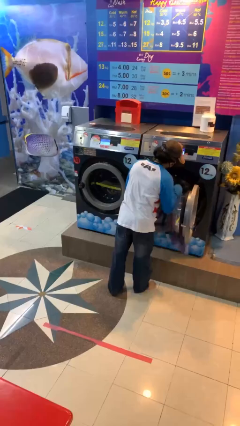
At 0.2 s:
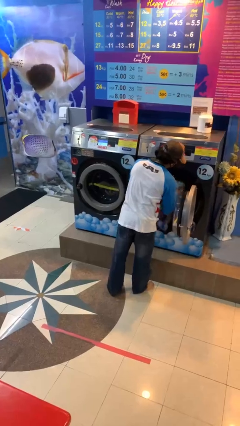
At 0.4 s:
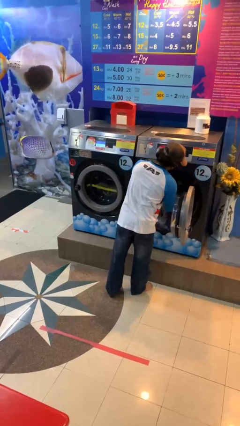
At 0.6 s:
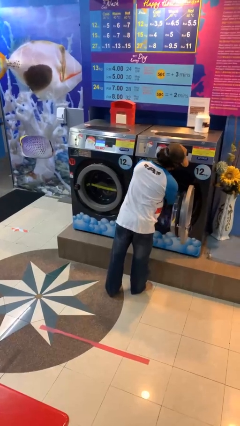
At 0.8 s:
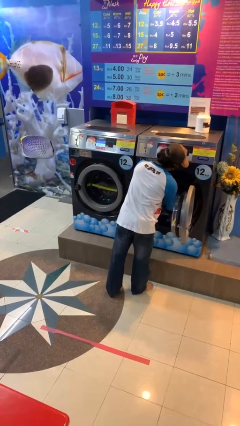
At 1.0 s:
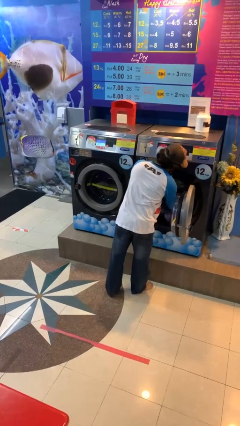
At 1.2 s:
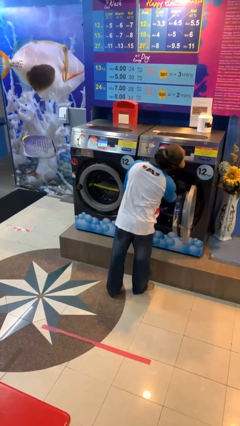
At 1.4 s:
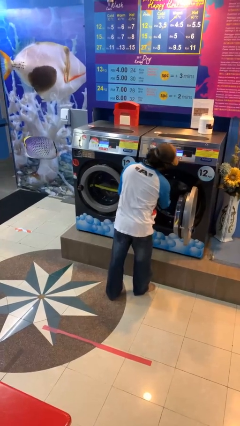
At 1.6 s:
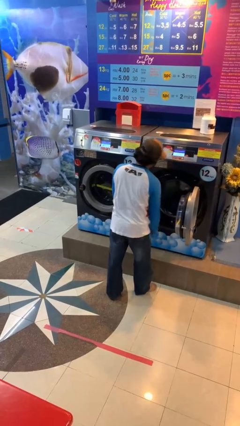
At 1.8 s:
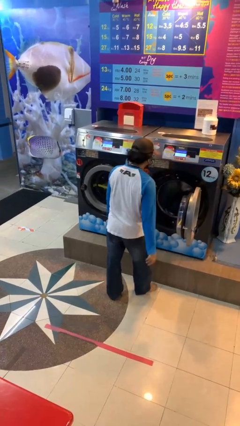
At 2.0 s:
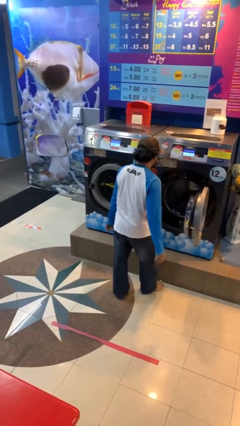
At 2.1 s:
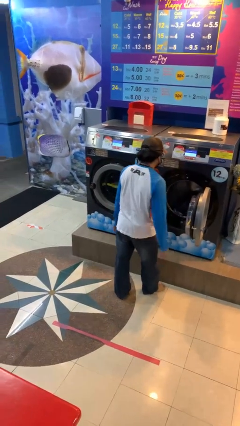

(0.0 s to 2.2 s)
person loads clotheswasher

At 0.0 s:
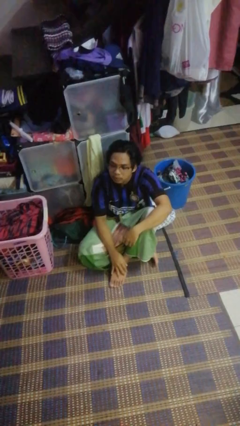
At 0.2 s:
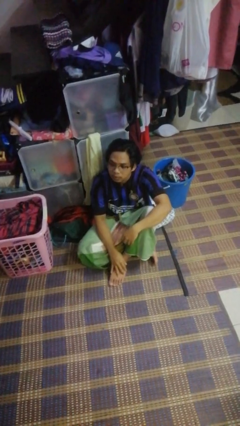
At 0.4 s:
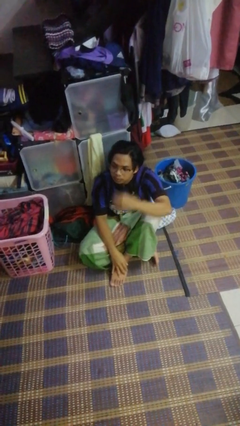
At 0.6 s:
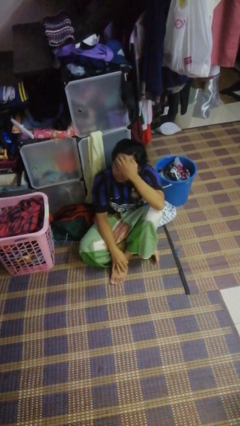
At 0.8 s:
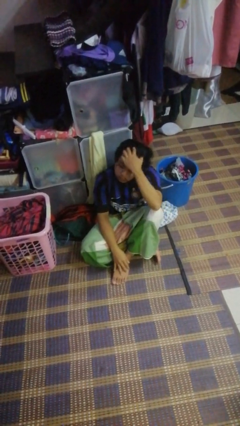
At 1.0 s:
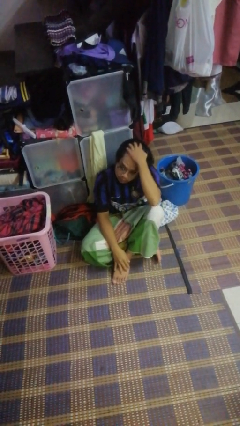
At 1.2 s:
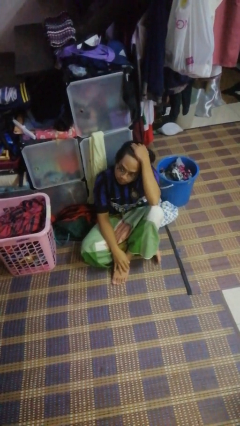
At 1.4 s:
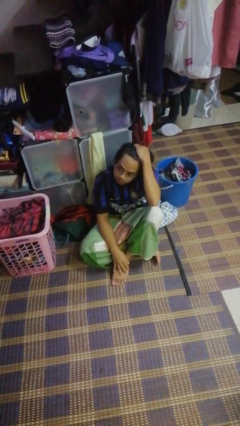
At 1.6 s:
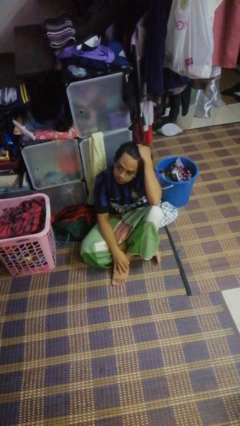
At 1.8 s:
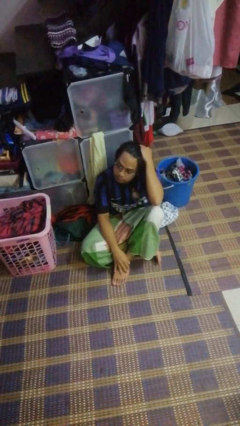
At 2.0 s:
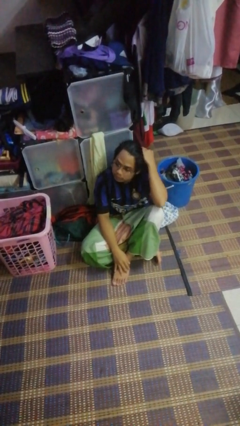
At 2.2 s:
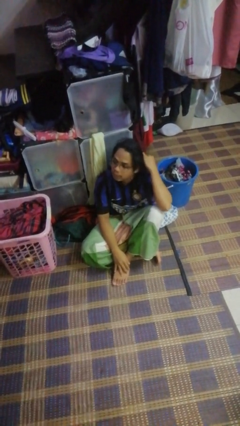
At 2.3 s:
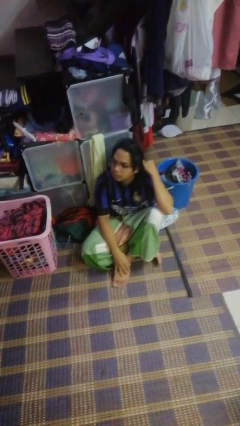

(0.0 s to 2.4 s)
person strokes hair

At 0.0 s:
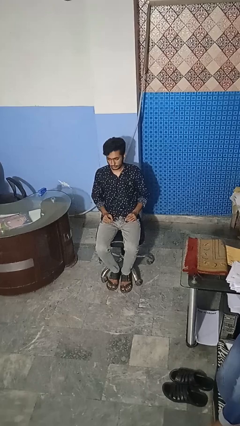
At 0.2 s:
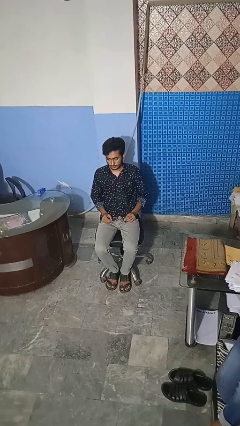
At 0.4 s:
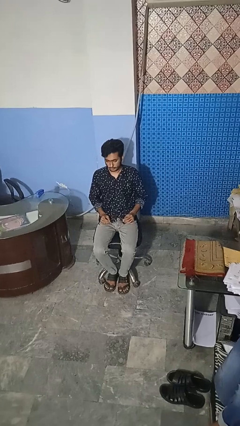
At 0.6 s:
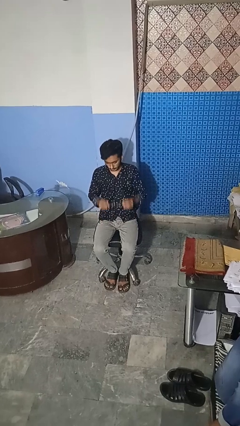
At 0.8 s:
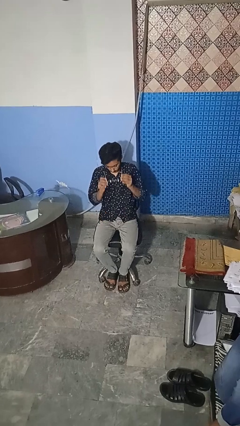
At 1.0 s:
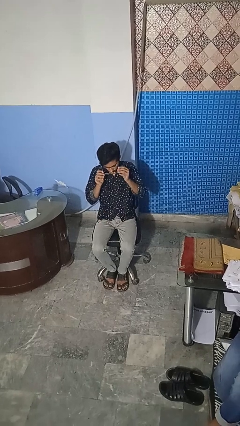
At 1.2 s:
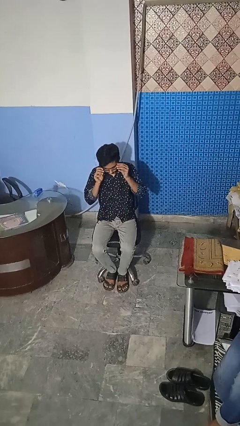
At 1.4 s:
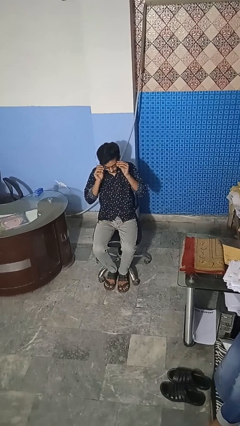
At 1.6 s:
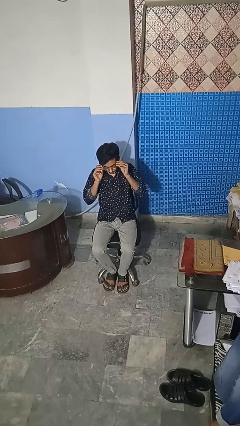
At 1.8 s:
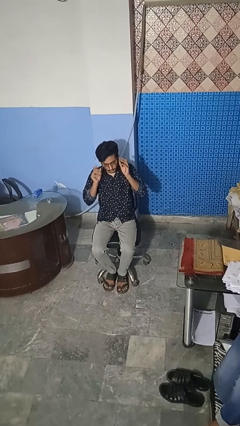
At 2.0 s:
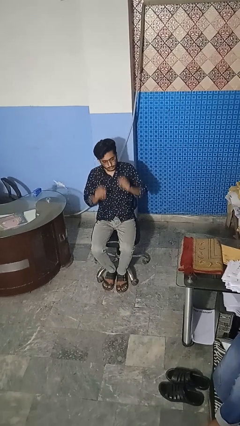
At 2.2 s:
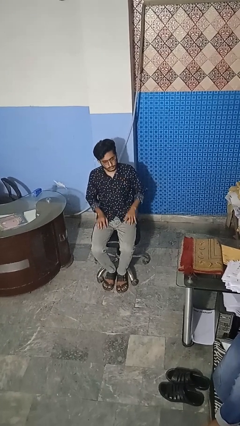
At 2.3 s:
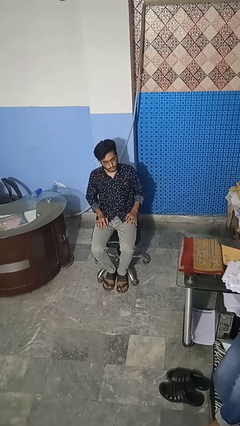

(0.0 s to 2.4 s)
person puts on glasses

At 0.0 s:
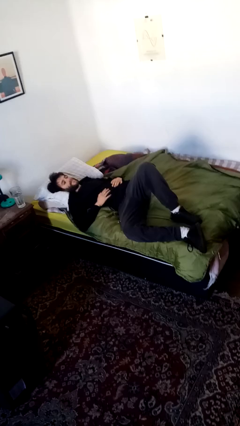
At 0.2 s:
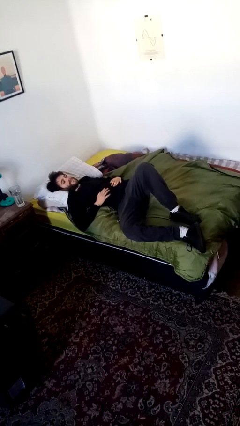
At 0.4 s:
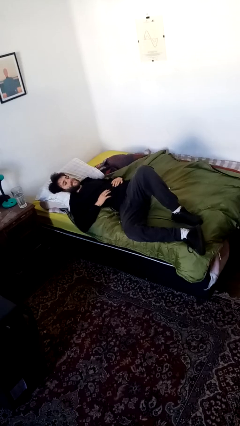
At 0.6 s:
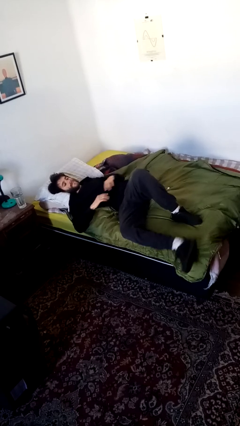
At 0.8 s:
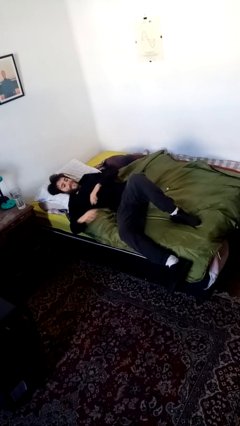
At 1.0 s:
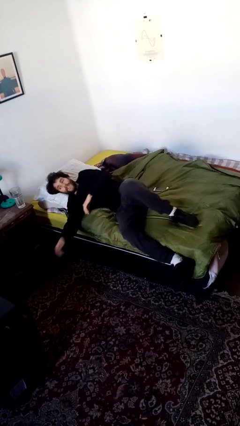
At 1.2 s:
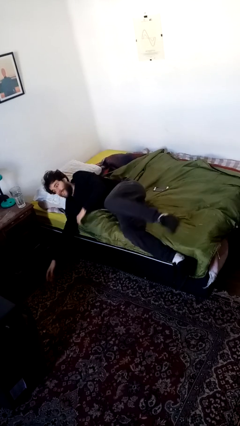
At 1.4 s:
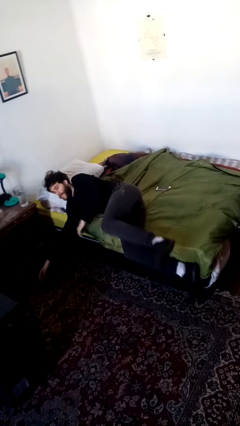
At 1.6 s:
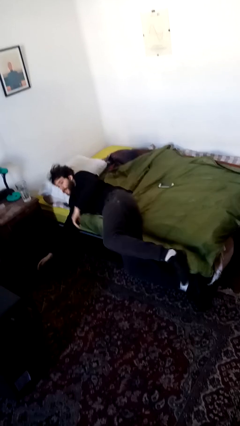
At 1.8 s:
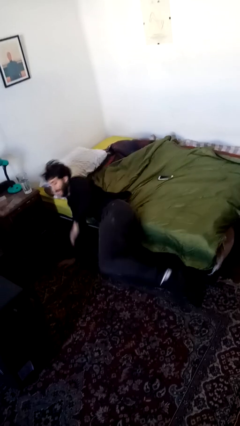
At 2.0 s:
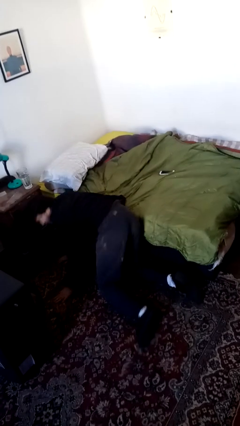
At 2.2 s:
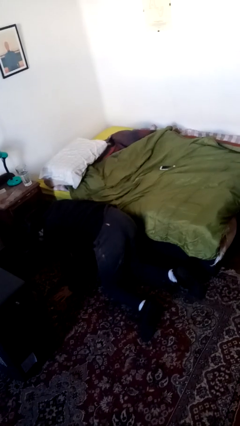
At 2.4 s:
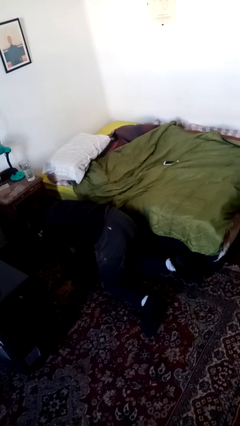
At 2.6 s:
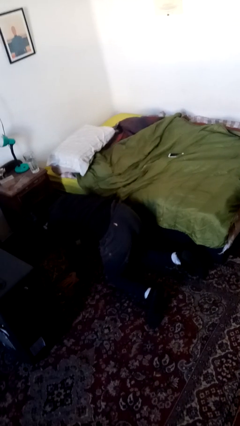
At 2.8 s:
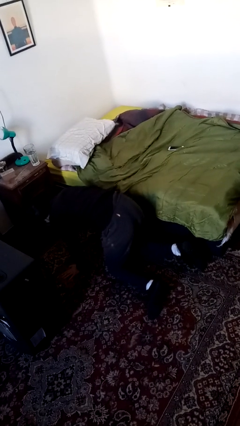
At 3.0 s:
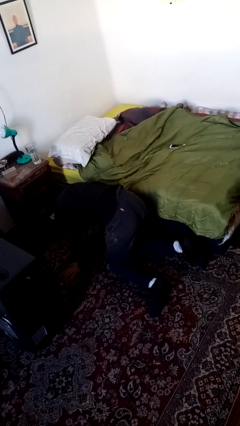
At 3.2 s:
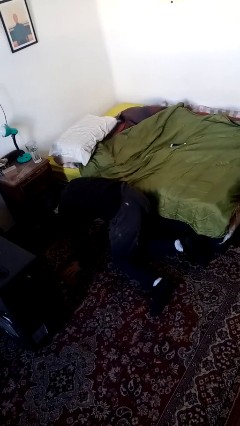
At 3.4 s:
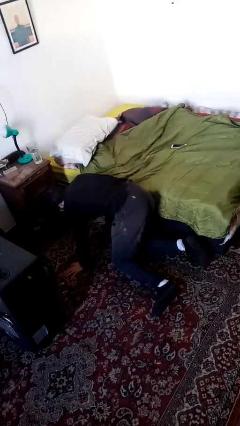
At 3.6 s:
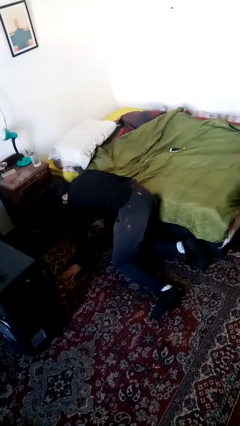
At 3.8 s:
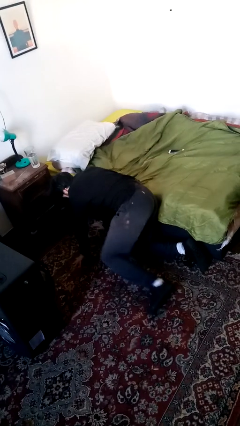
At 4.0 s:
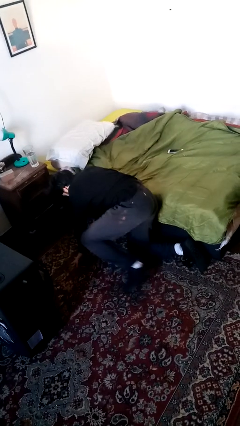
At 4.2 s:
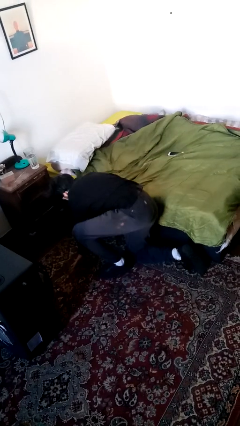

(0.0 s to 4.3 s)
person falls from chair

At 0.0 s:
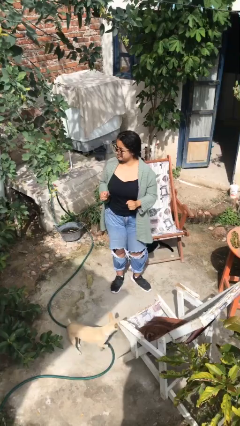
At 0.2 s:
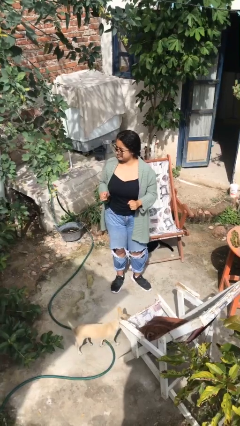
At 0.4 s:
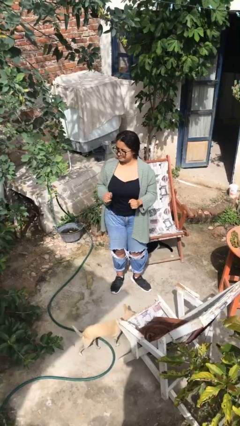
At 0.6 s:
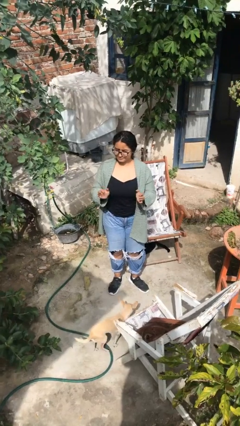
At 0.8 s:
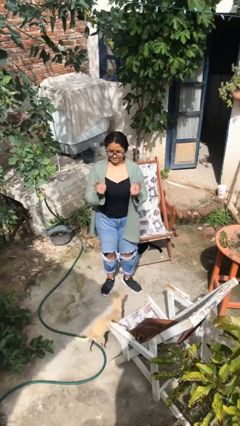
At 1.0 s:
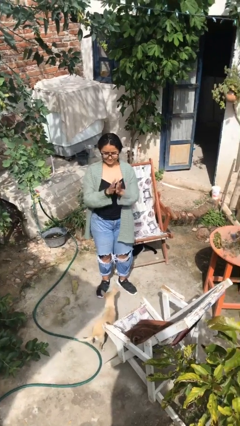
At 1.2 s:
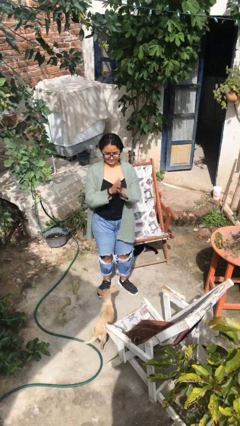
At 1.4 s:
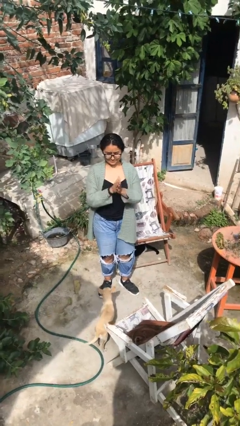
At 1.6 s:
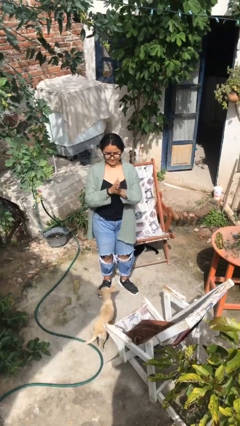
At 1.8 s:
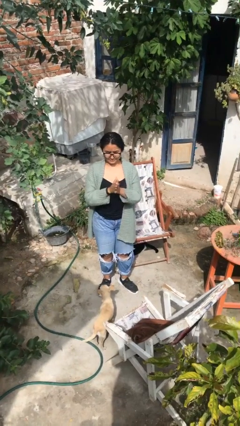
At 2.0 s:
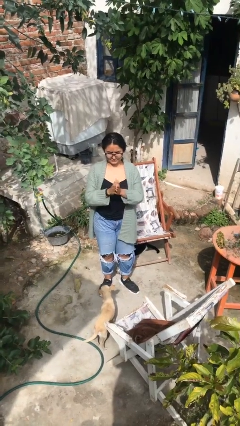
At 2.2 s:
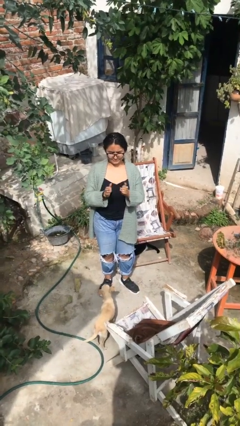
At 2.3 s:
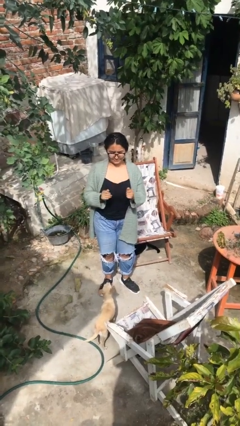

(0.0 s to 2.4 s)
person claps hands

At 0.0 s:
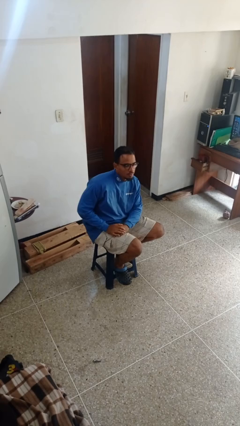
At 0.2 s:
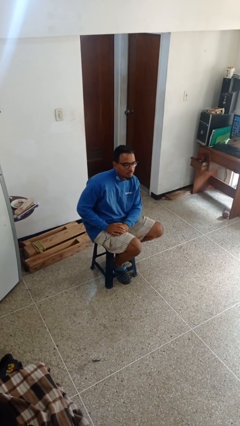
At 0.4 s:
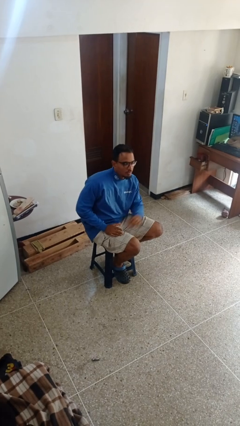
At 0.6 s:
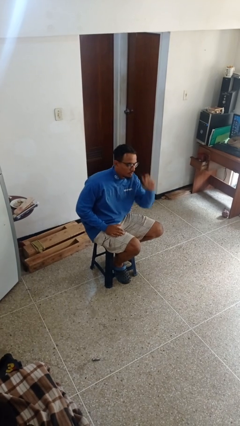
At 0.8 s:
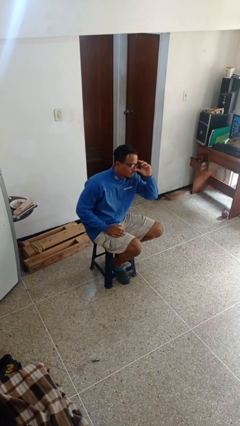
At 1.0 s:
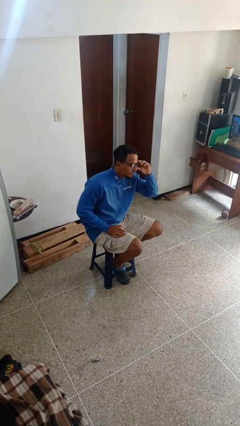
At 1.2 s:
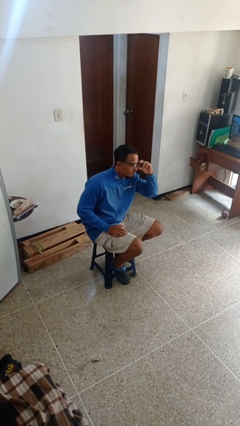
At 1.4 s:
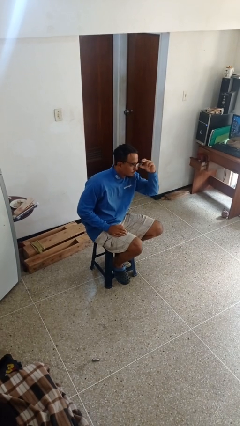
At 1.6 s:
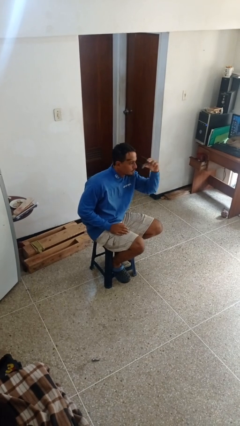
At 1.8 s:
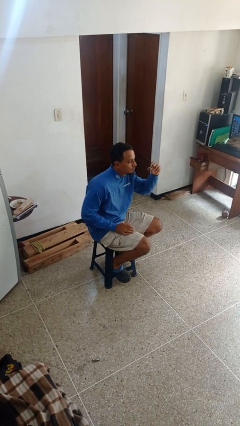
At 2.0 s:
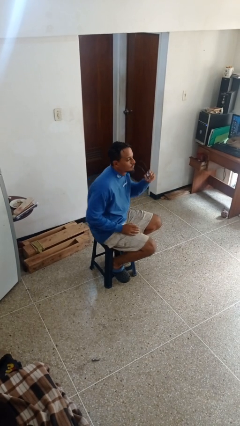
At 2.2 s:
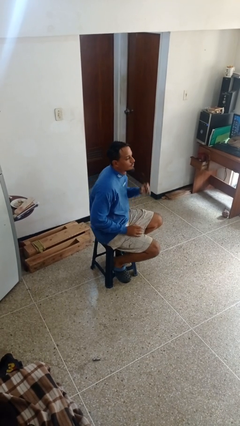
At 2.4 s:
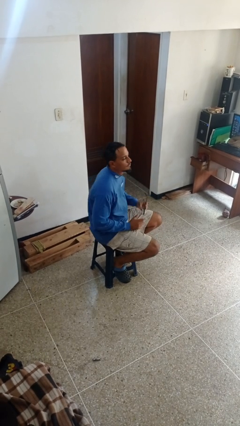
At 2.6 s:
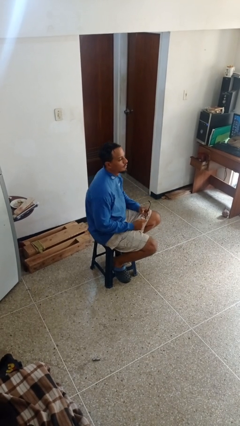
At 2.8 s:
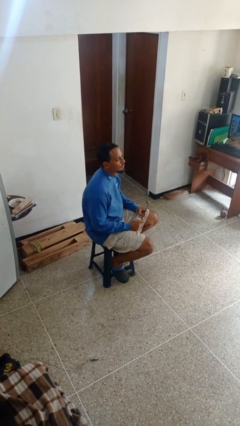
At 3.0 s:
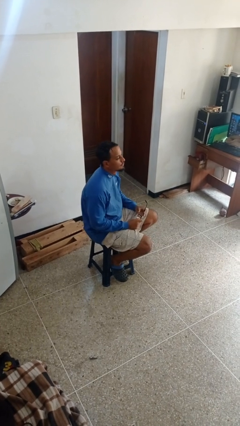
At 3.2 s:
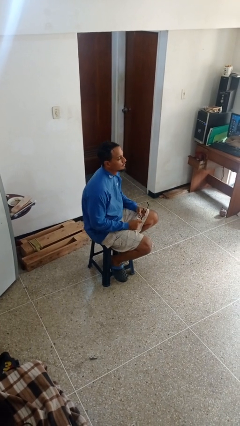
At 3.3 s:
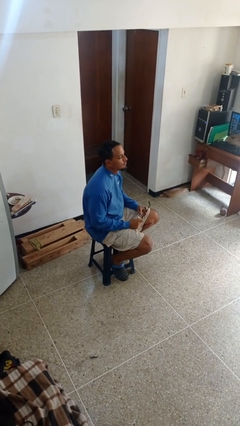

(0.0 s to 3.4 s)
person takes off glasses

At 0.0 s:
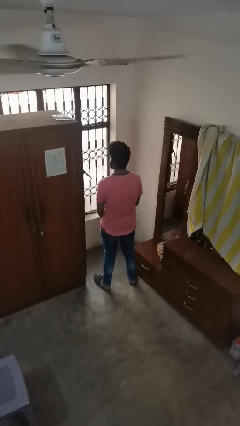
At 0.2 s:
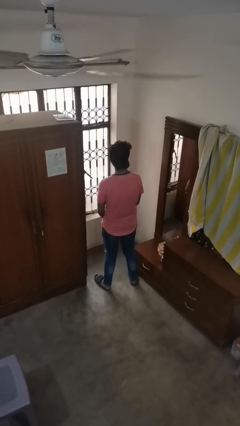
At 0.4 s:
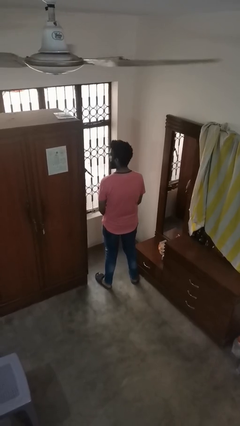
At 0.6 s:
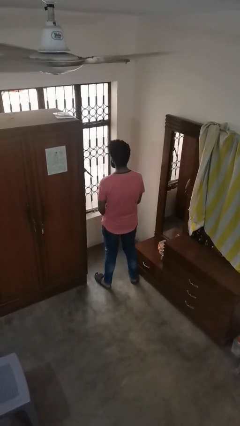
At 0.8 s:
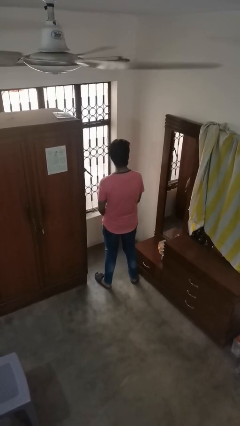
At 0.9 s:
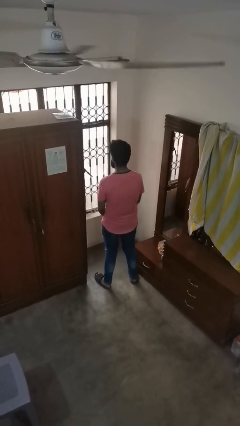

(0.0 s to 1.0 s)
person shakes head
